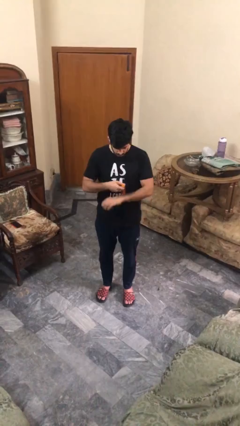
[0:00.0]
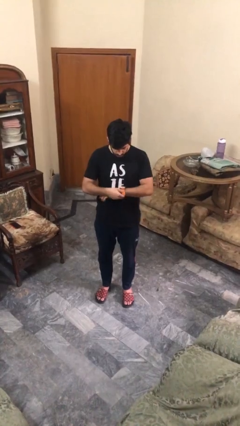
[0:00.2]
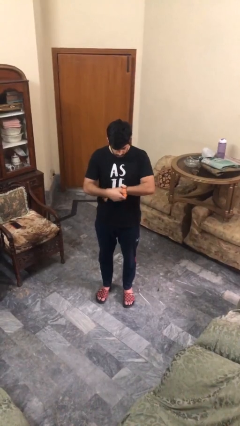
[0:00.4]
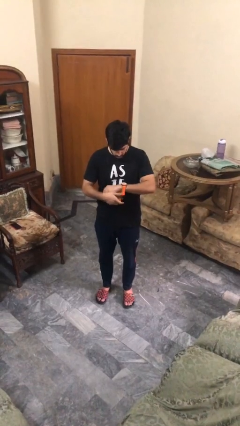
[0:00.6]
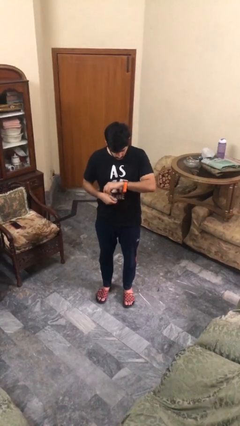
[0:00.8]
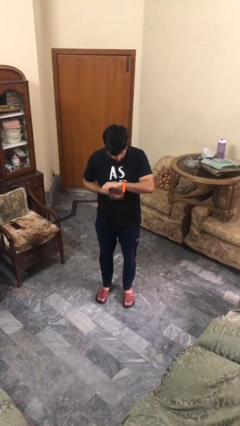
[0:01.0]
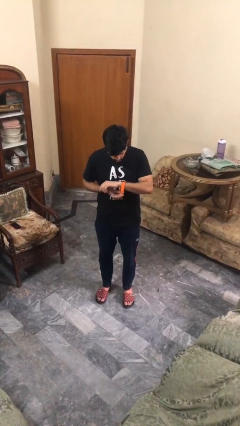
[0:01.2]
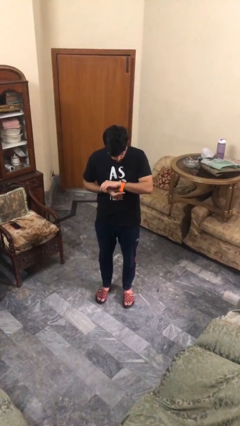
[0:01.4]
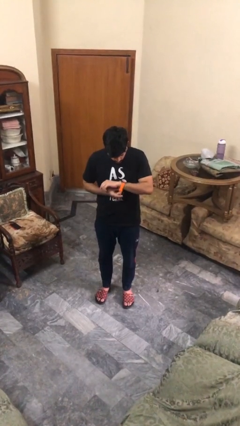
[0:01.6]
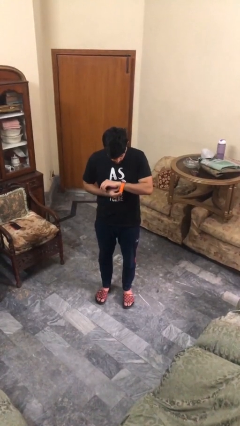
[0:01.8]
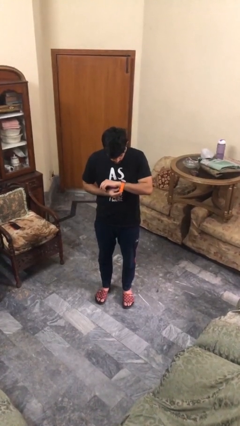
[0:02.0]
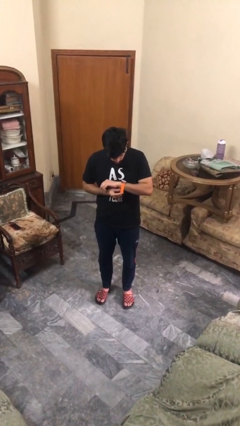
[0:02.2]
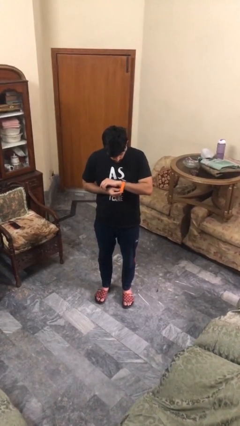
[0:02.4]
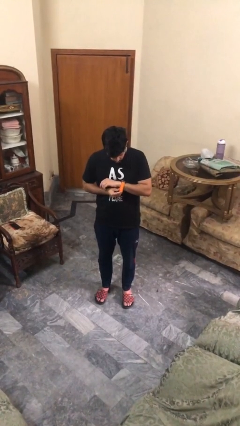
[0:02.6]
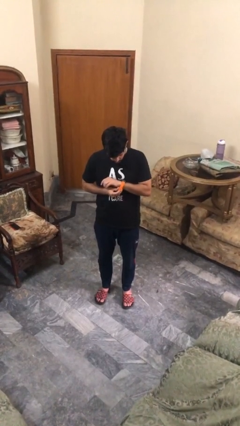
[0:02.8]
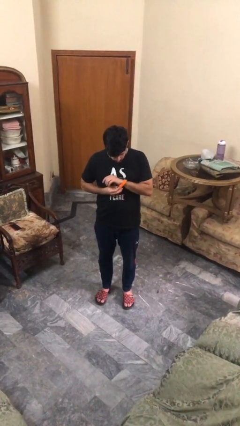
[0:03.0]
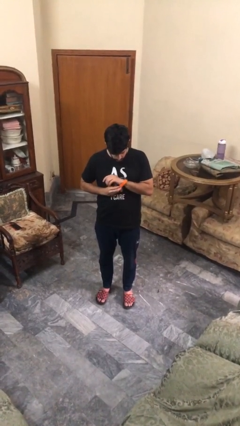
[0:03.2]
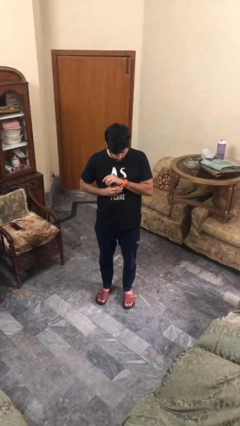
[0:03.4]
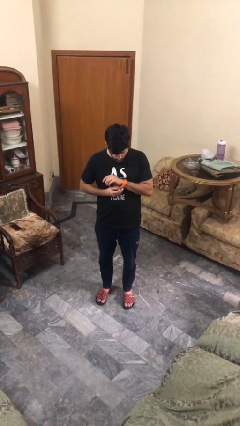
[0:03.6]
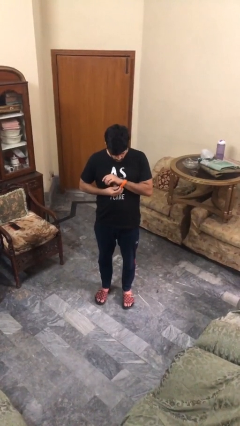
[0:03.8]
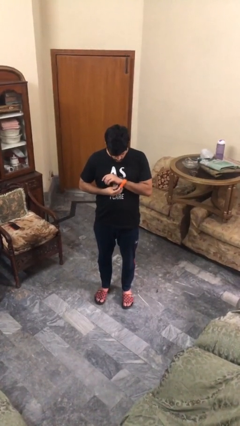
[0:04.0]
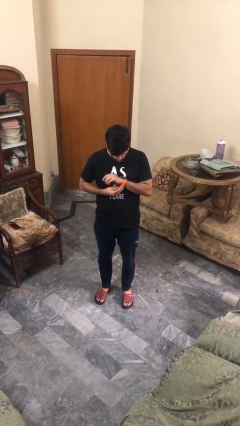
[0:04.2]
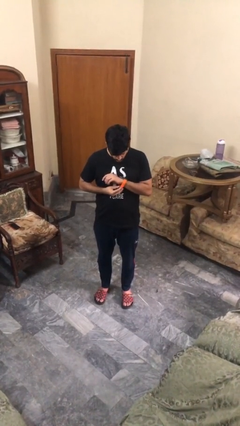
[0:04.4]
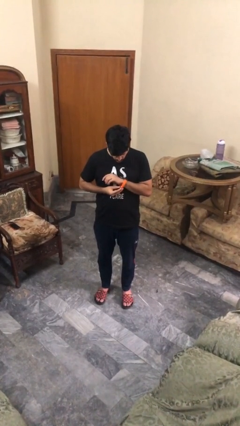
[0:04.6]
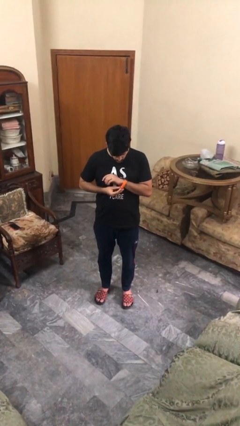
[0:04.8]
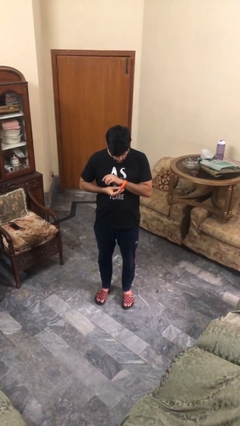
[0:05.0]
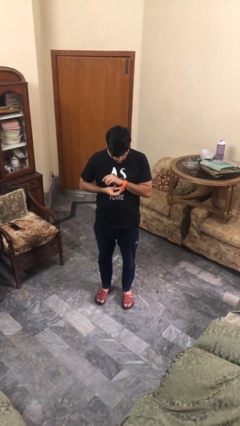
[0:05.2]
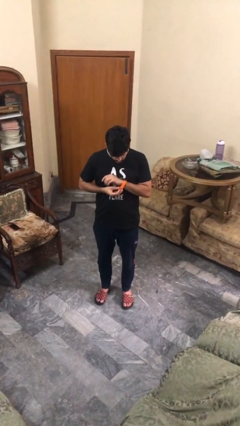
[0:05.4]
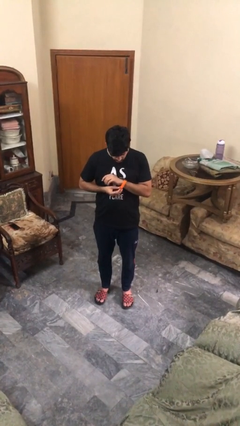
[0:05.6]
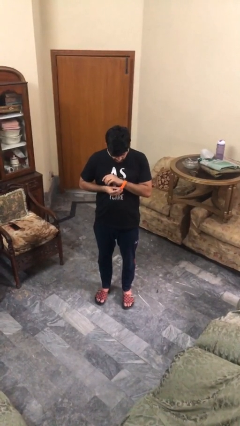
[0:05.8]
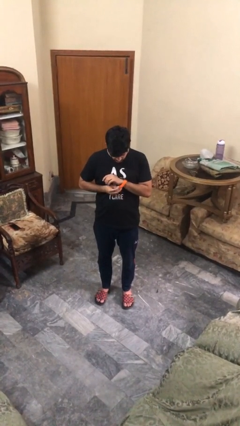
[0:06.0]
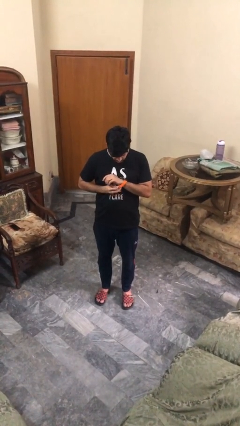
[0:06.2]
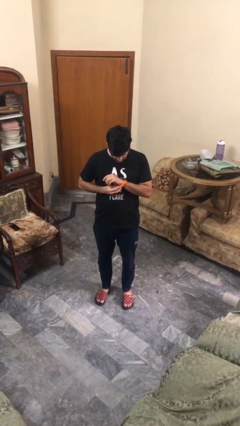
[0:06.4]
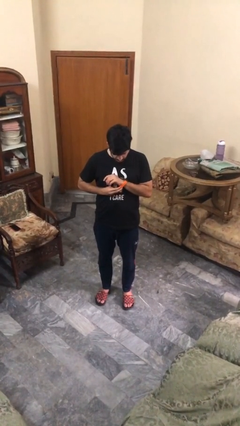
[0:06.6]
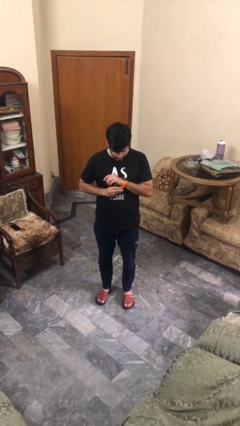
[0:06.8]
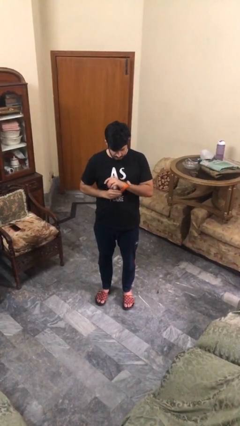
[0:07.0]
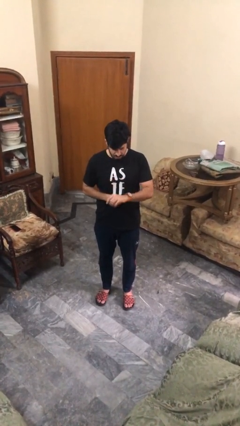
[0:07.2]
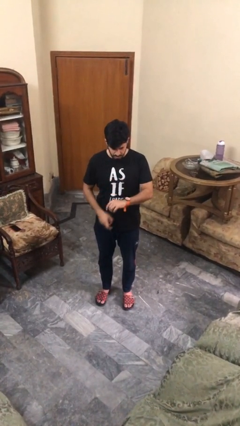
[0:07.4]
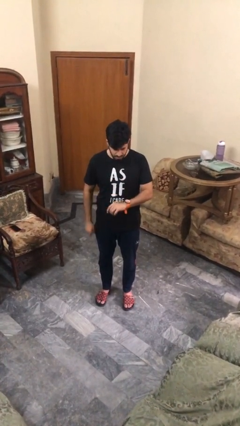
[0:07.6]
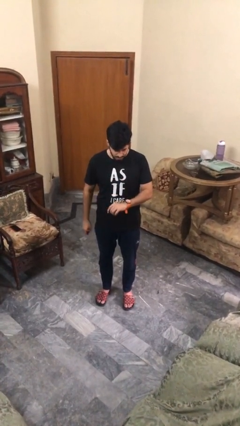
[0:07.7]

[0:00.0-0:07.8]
person puts on wristwatch

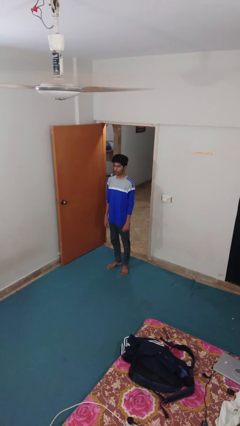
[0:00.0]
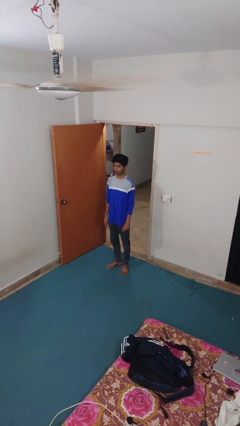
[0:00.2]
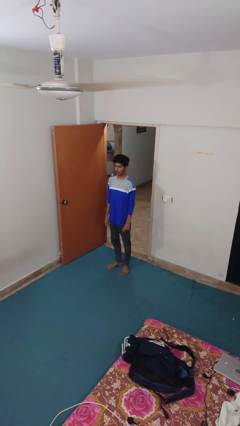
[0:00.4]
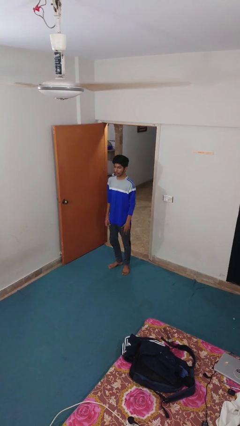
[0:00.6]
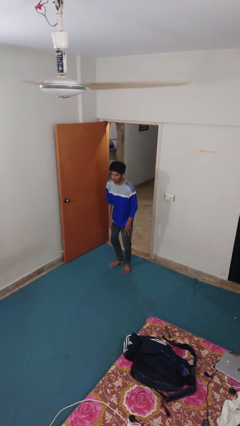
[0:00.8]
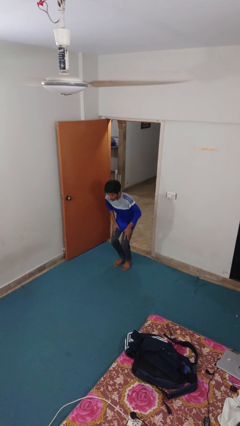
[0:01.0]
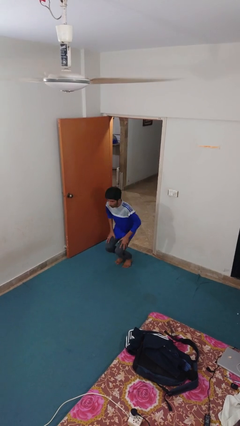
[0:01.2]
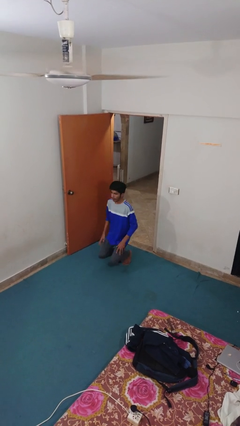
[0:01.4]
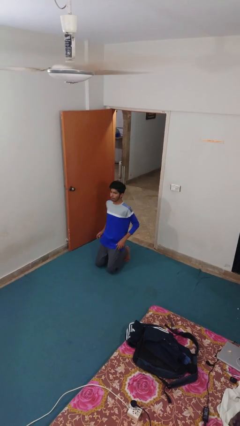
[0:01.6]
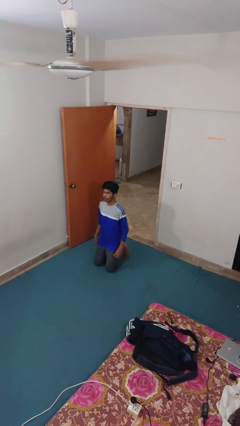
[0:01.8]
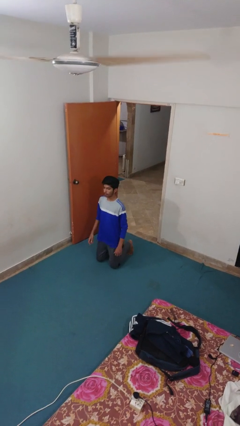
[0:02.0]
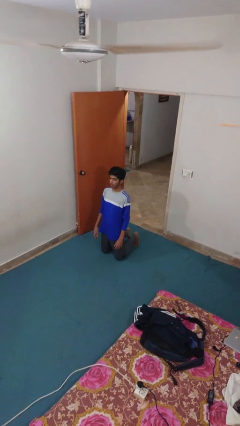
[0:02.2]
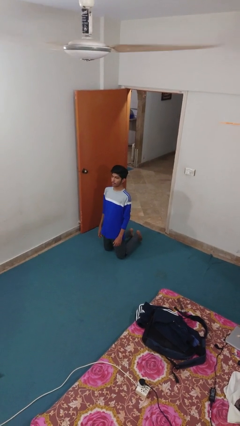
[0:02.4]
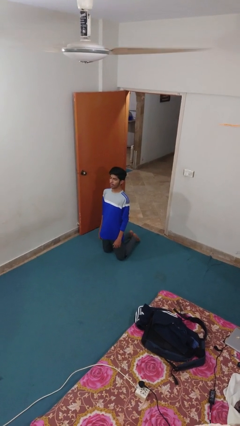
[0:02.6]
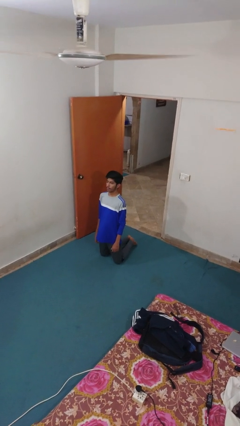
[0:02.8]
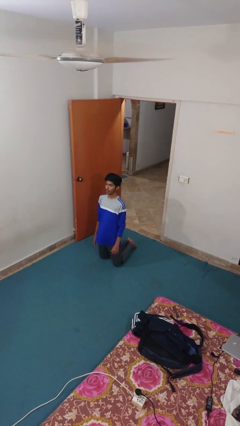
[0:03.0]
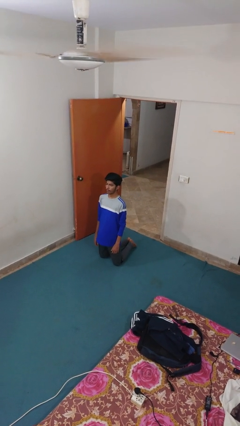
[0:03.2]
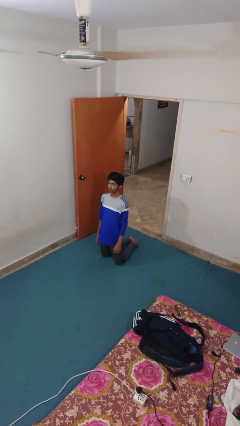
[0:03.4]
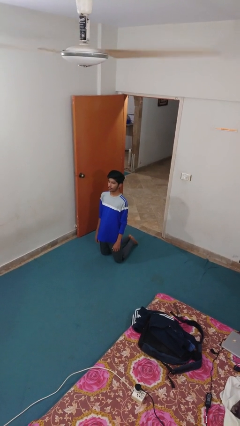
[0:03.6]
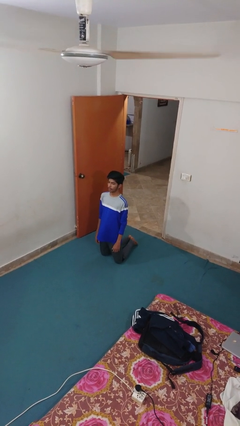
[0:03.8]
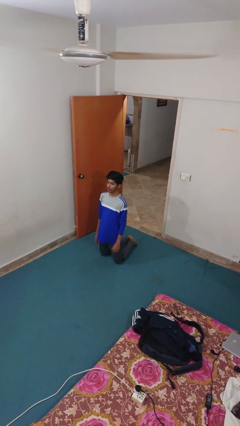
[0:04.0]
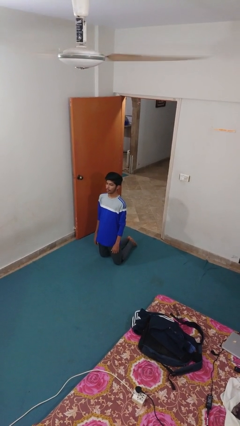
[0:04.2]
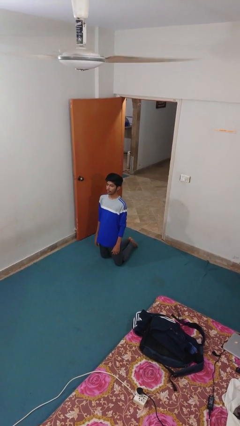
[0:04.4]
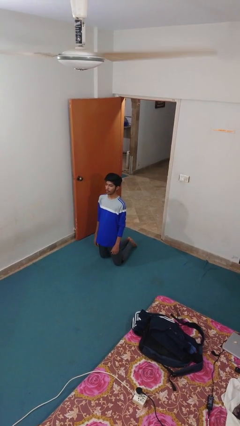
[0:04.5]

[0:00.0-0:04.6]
person kneels

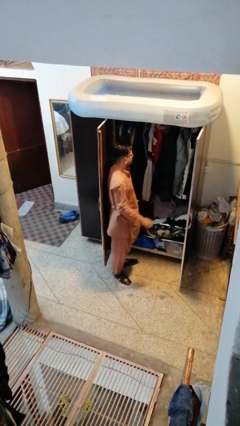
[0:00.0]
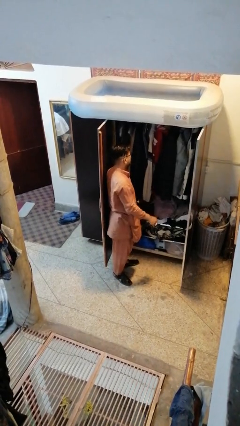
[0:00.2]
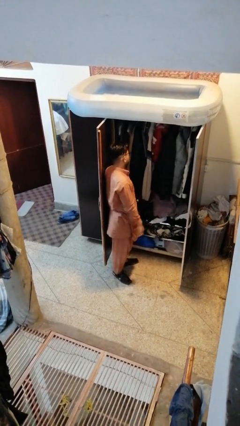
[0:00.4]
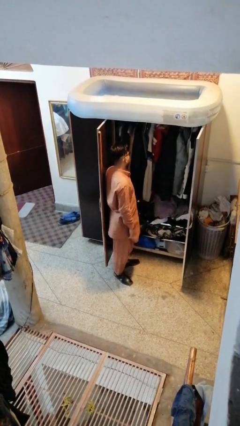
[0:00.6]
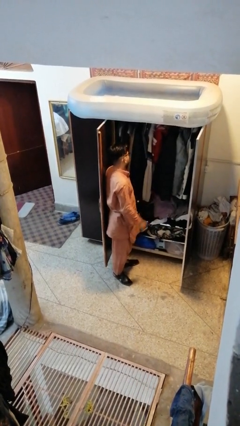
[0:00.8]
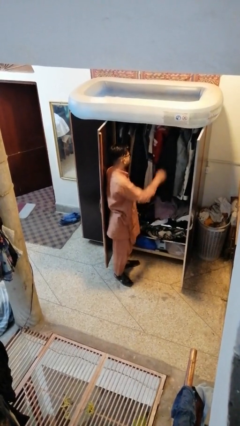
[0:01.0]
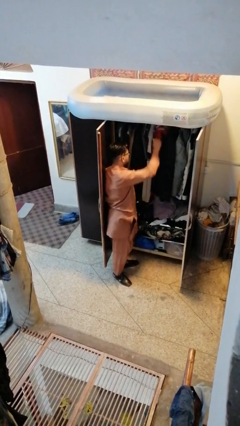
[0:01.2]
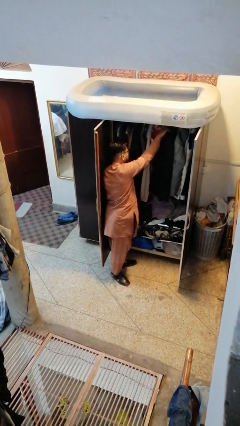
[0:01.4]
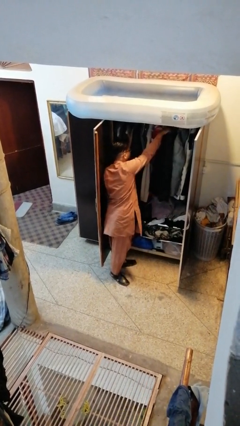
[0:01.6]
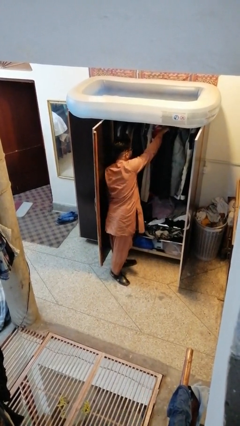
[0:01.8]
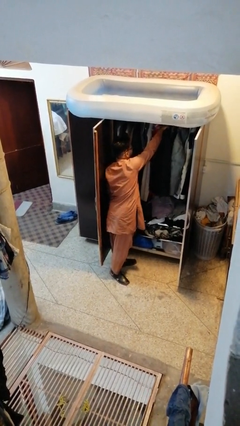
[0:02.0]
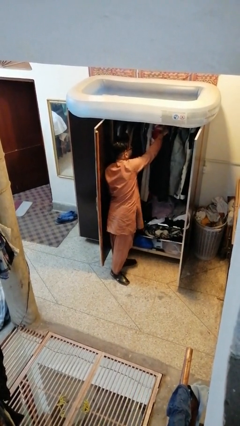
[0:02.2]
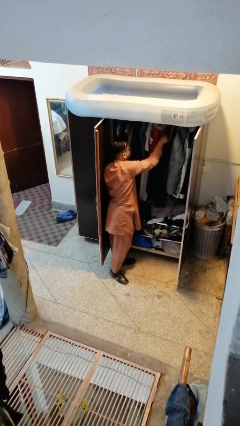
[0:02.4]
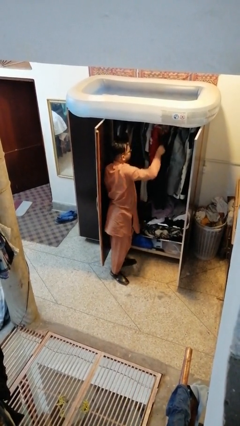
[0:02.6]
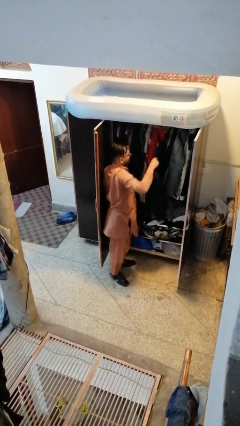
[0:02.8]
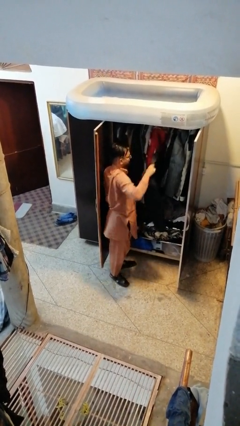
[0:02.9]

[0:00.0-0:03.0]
person takes clothes from closet

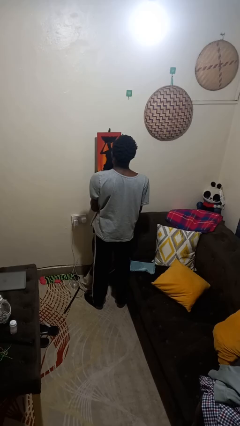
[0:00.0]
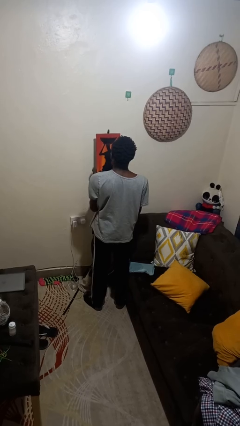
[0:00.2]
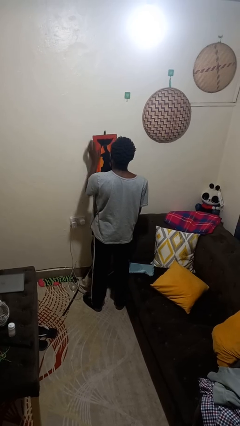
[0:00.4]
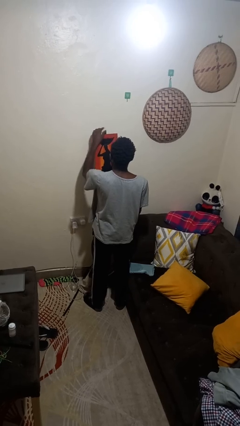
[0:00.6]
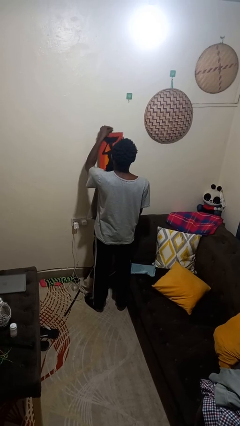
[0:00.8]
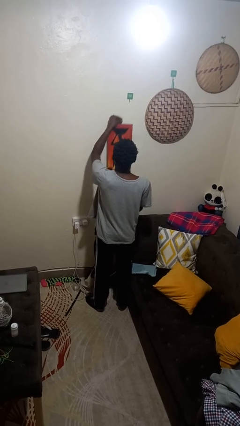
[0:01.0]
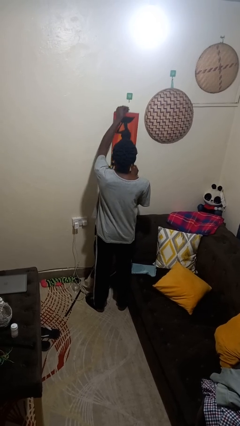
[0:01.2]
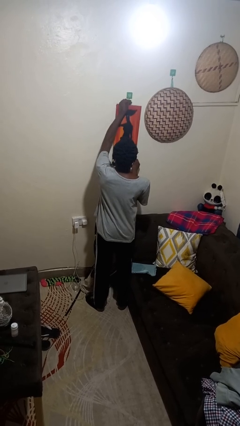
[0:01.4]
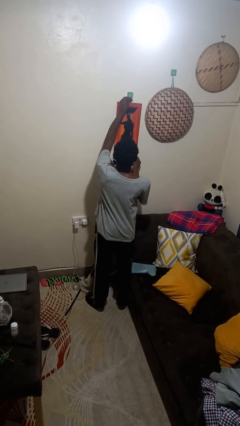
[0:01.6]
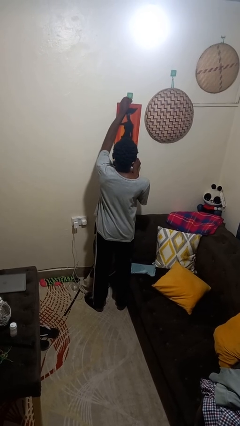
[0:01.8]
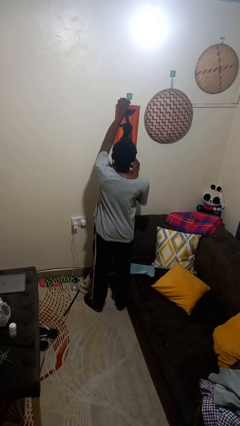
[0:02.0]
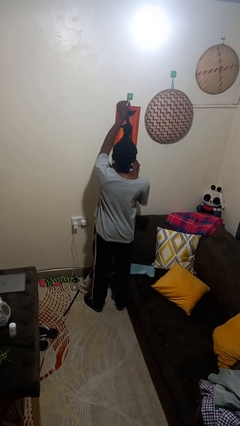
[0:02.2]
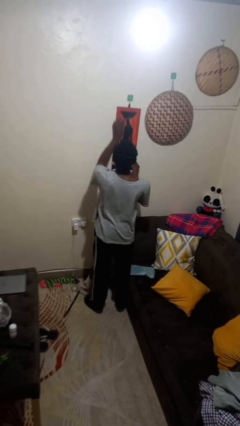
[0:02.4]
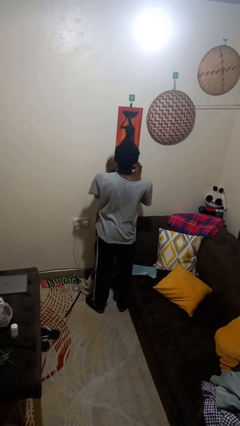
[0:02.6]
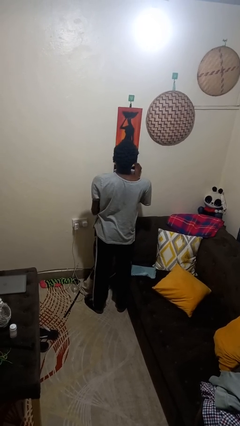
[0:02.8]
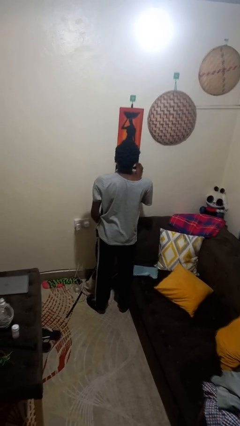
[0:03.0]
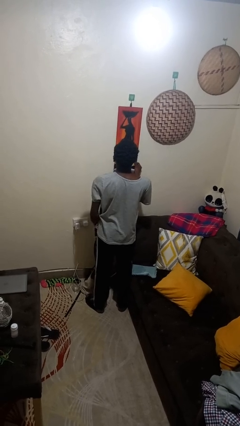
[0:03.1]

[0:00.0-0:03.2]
person puts up picture frame
